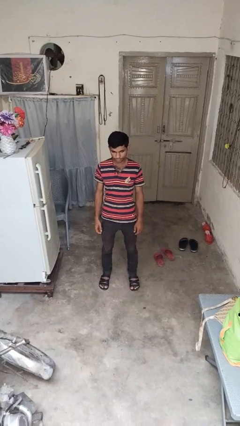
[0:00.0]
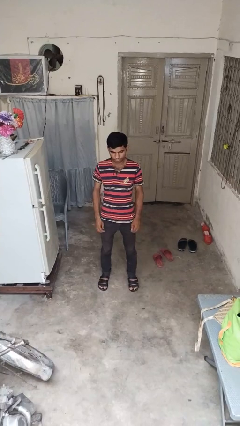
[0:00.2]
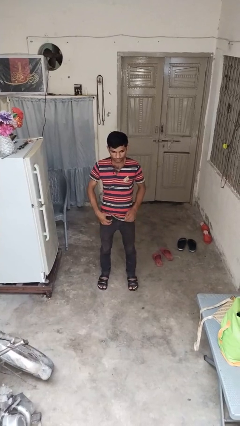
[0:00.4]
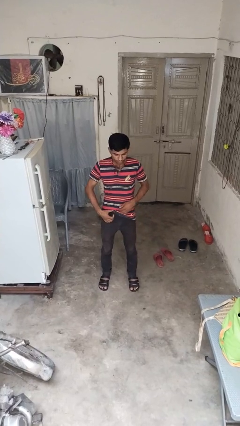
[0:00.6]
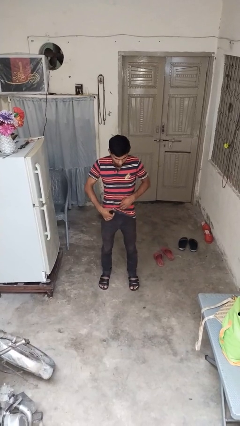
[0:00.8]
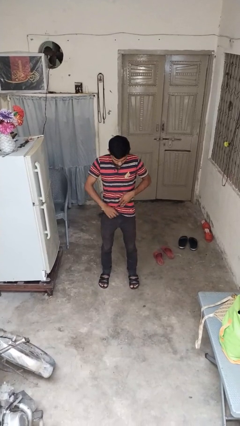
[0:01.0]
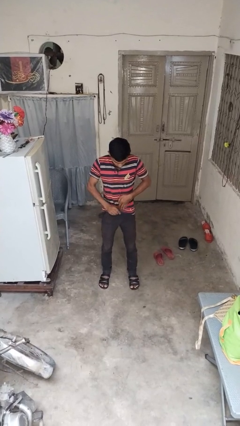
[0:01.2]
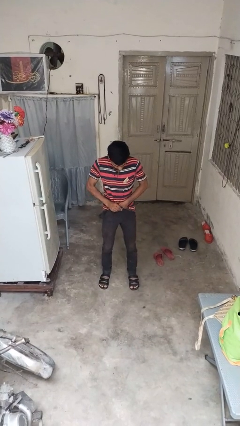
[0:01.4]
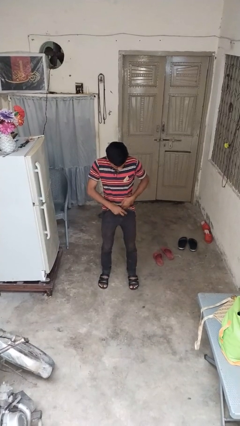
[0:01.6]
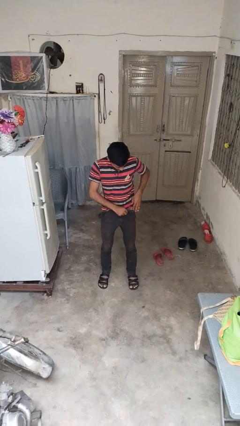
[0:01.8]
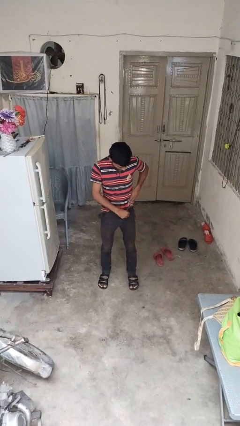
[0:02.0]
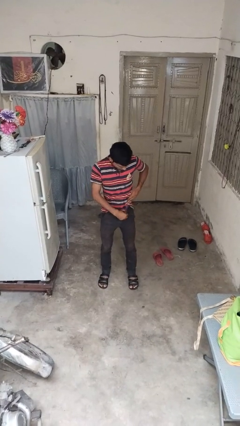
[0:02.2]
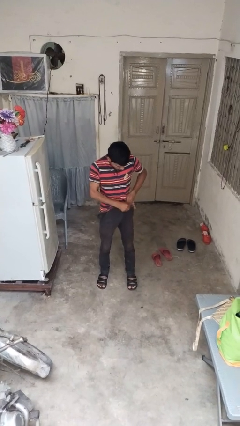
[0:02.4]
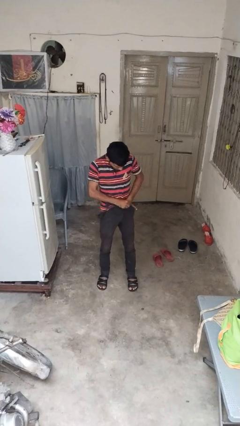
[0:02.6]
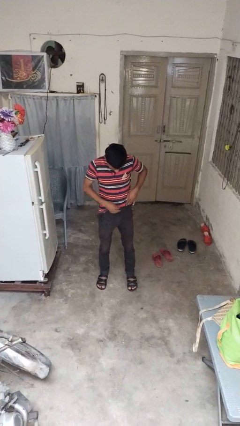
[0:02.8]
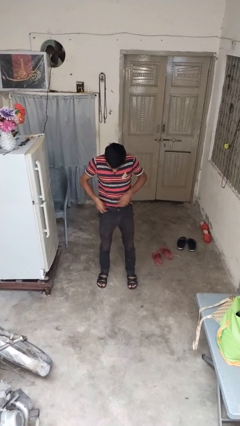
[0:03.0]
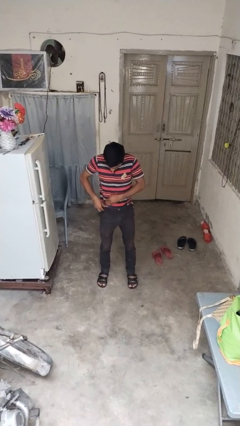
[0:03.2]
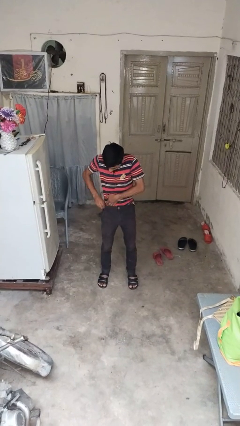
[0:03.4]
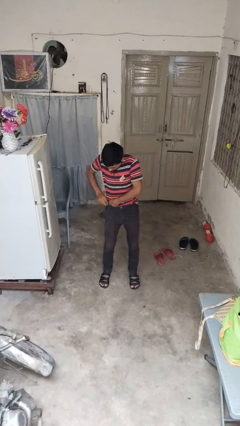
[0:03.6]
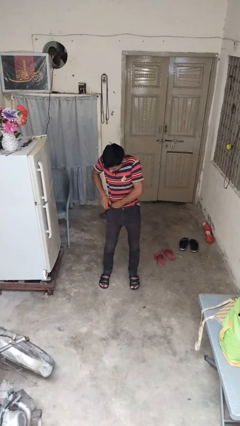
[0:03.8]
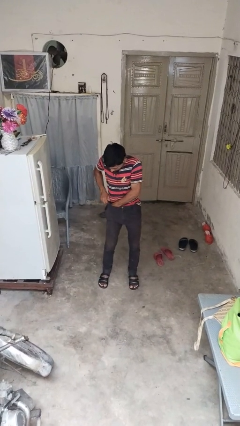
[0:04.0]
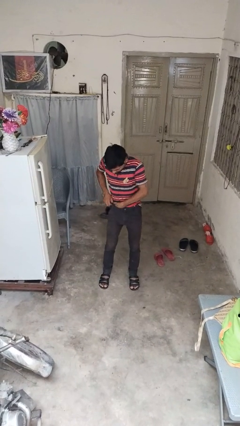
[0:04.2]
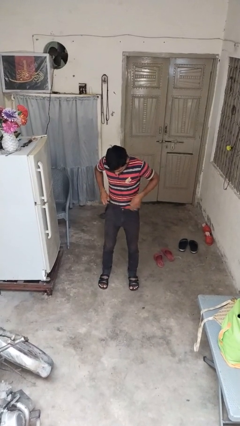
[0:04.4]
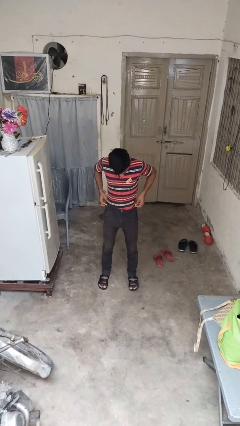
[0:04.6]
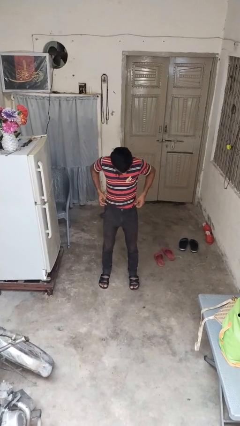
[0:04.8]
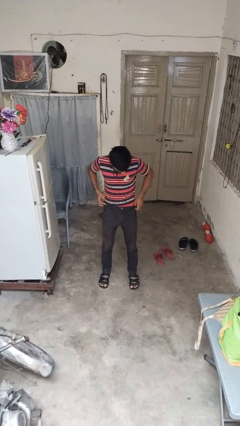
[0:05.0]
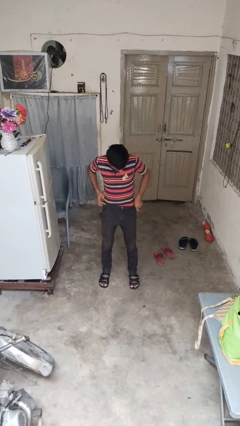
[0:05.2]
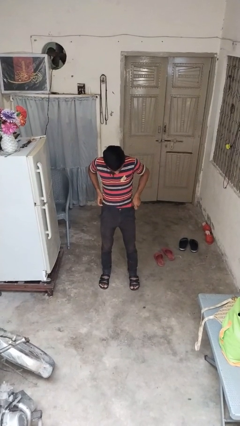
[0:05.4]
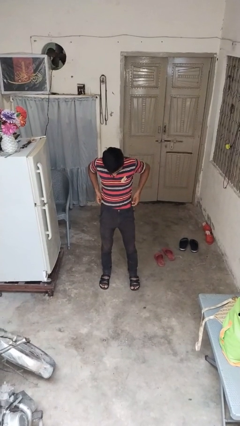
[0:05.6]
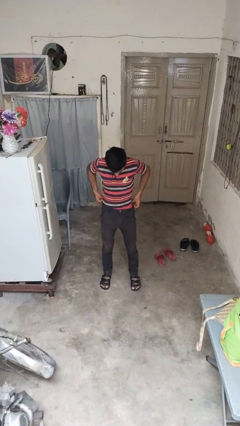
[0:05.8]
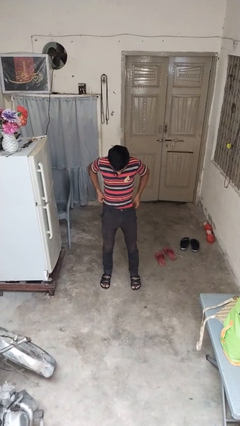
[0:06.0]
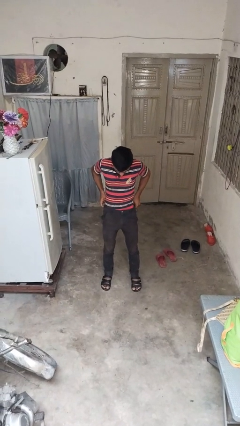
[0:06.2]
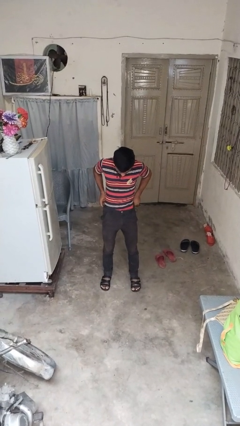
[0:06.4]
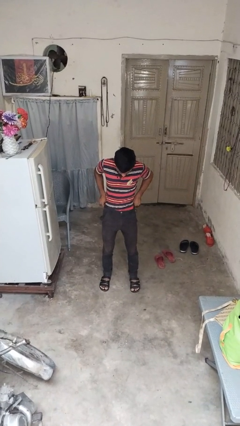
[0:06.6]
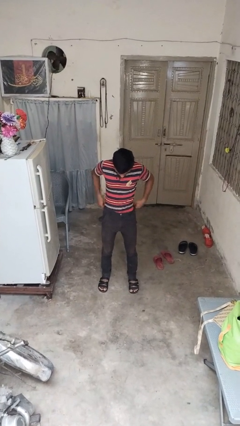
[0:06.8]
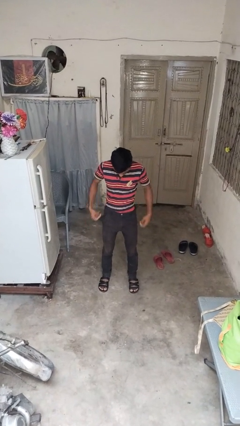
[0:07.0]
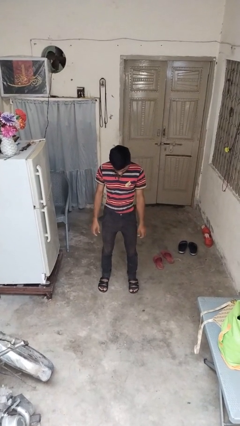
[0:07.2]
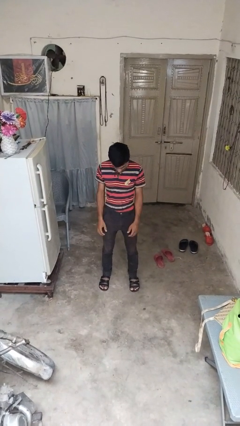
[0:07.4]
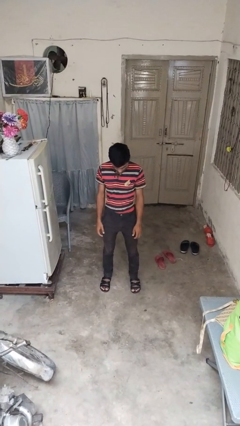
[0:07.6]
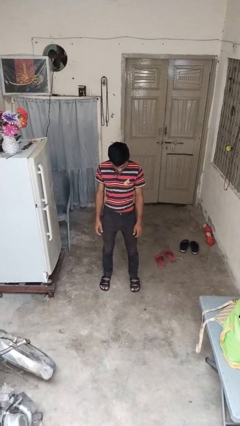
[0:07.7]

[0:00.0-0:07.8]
person tucks in shirt

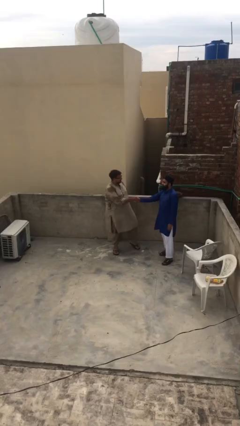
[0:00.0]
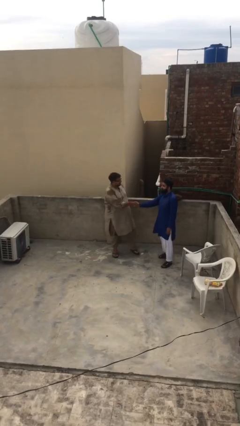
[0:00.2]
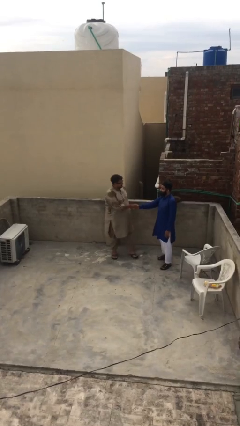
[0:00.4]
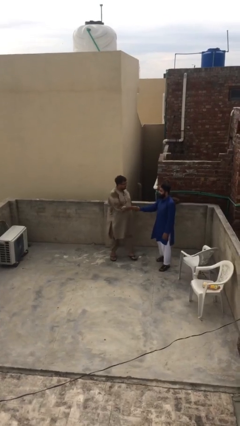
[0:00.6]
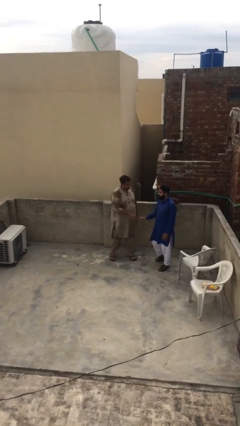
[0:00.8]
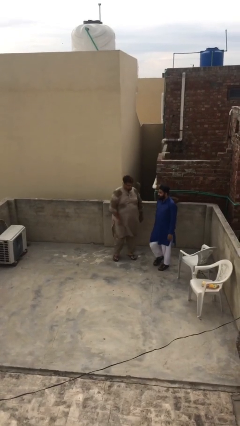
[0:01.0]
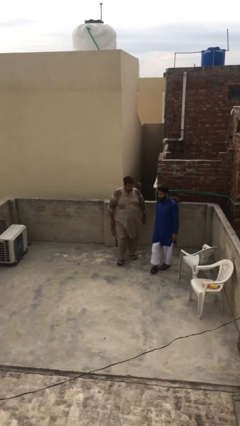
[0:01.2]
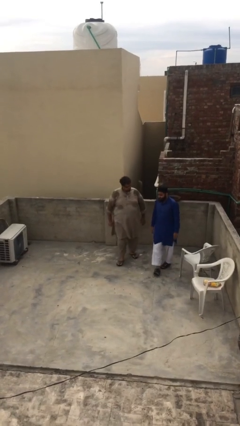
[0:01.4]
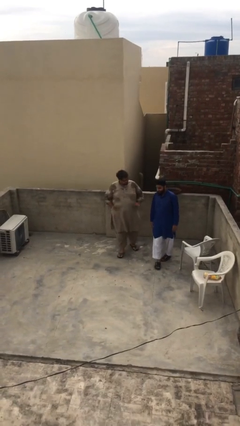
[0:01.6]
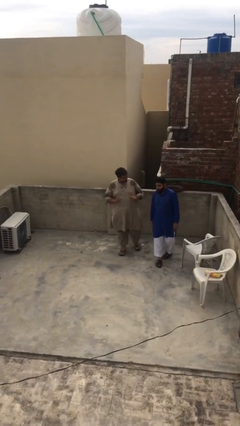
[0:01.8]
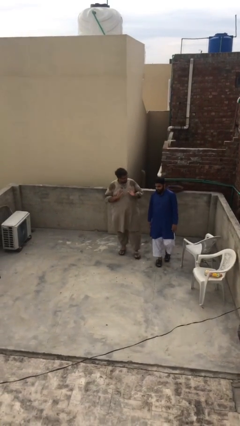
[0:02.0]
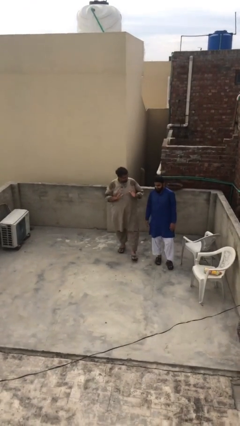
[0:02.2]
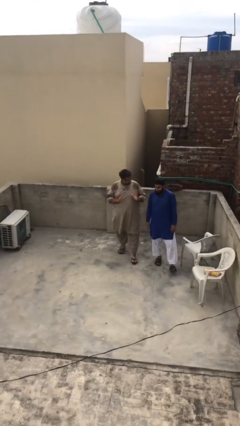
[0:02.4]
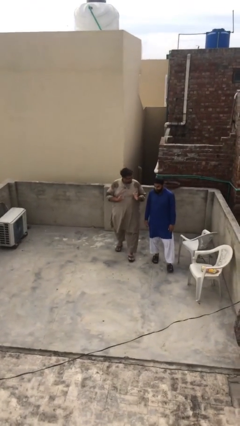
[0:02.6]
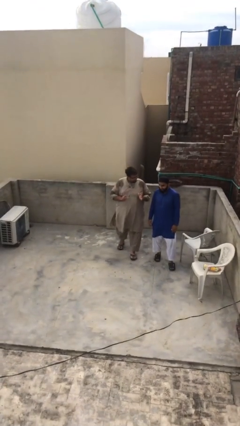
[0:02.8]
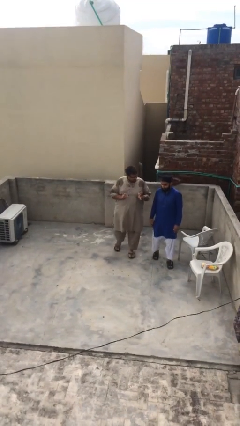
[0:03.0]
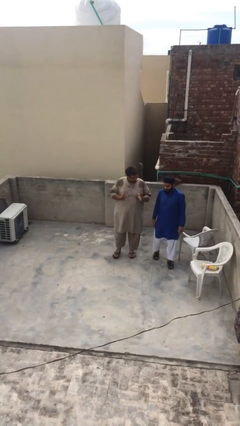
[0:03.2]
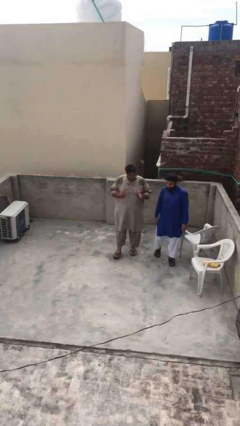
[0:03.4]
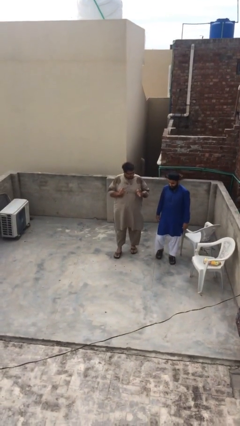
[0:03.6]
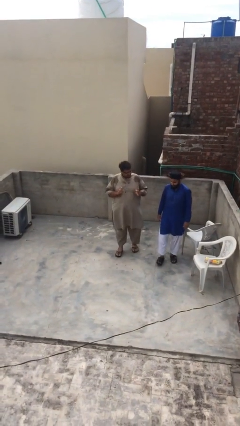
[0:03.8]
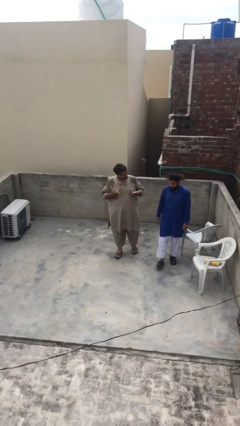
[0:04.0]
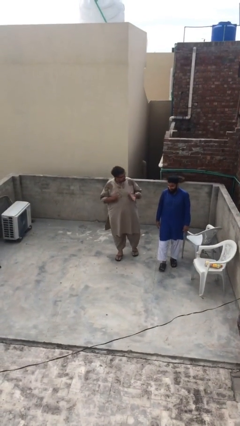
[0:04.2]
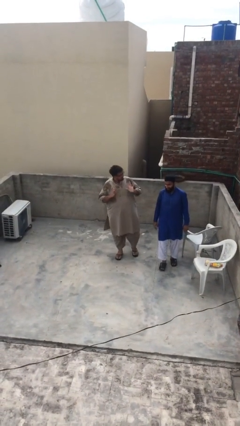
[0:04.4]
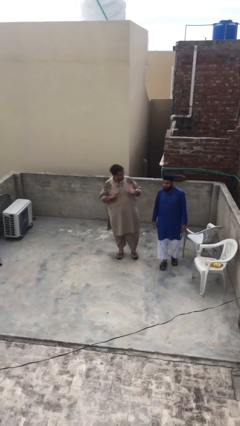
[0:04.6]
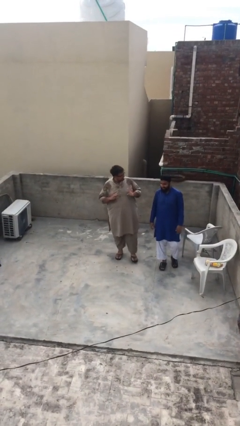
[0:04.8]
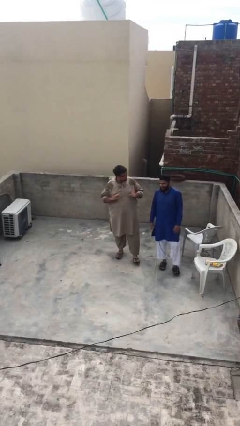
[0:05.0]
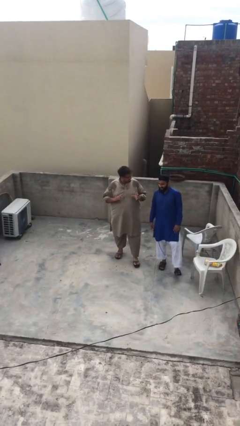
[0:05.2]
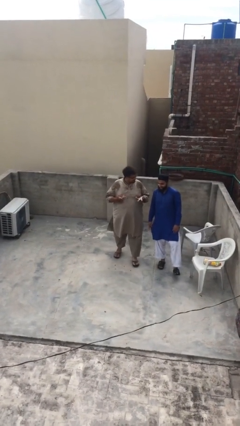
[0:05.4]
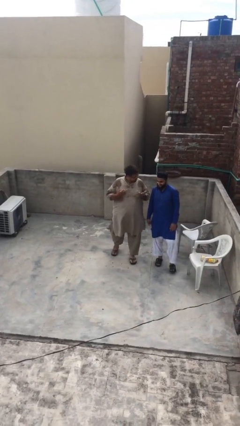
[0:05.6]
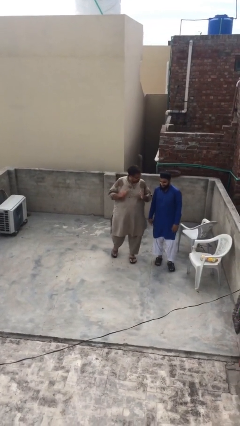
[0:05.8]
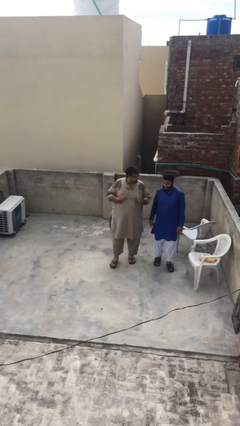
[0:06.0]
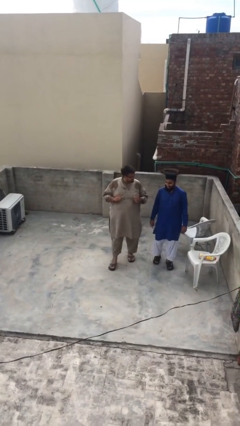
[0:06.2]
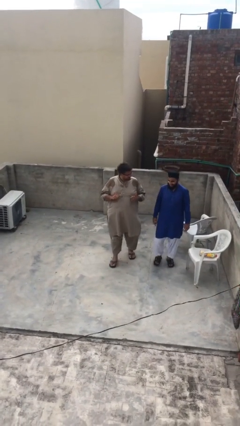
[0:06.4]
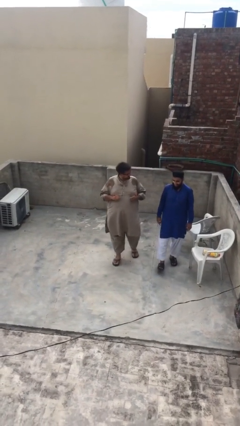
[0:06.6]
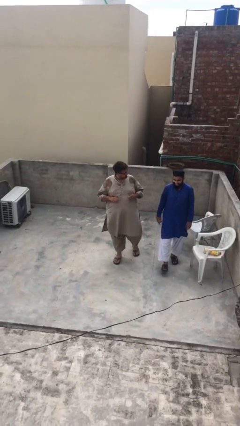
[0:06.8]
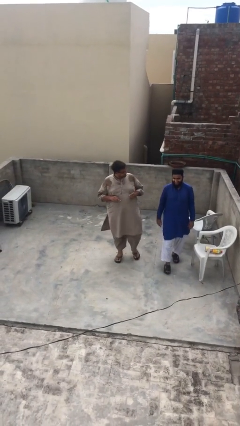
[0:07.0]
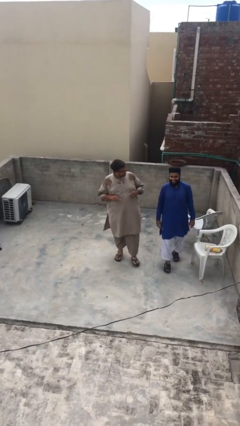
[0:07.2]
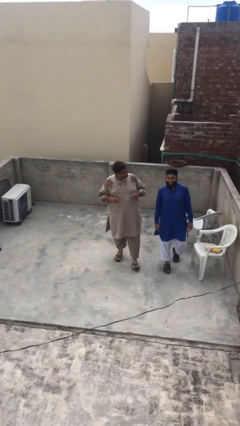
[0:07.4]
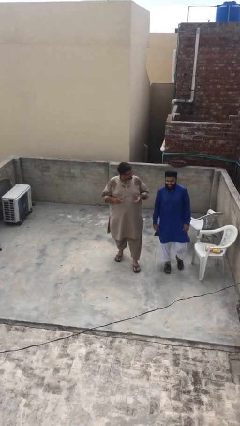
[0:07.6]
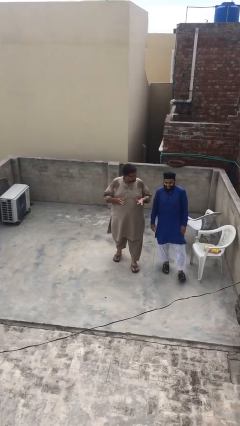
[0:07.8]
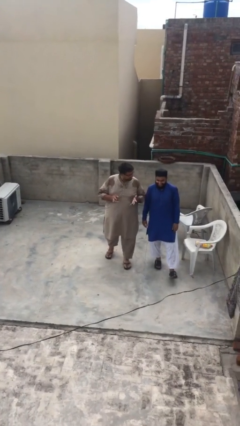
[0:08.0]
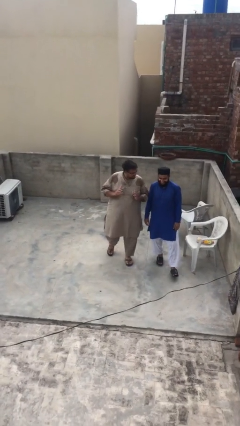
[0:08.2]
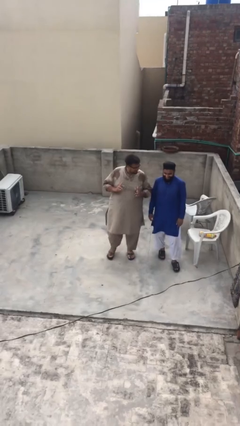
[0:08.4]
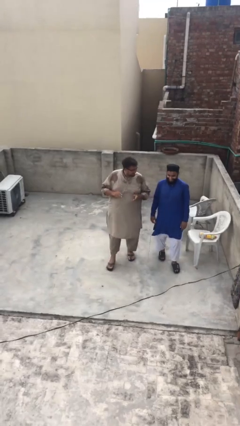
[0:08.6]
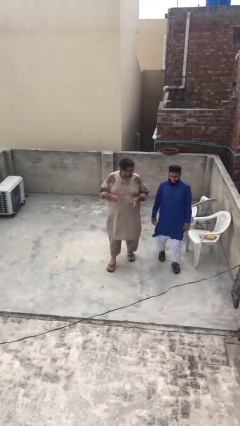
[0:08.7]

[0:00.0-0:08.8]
person talks to person

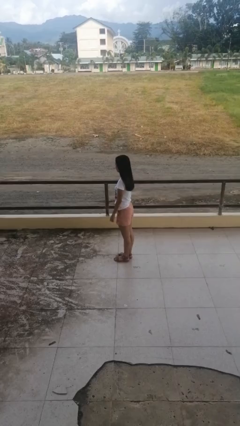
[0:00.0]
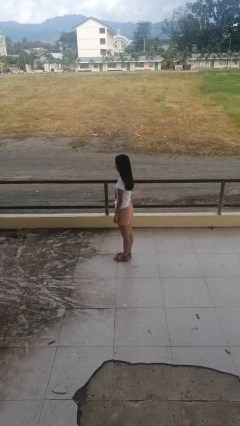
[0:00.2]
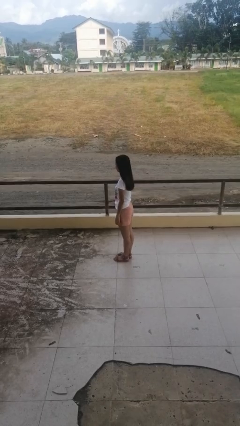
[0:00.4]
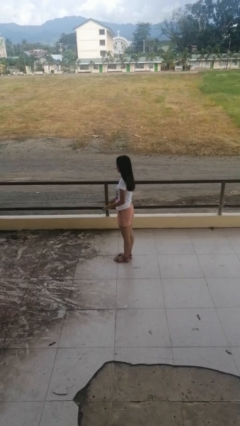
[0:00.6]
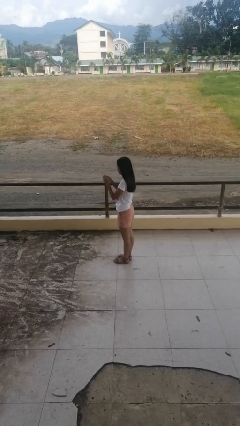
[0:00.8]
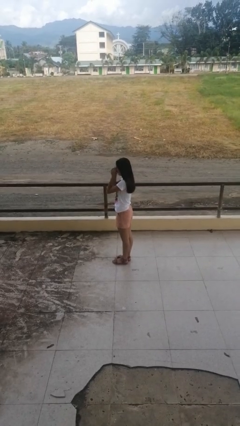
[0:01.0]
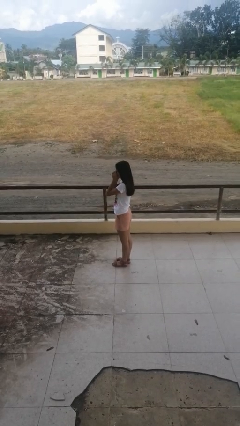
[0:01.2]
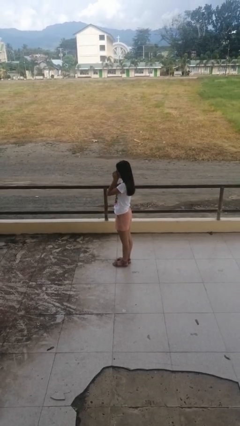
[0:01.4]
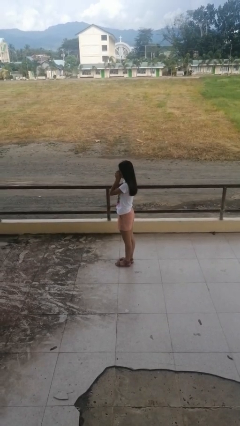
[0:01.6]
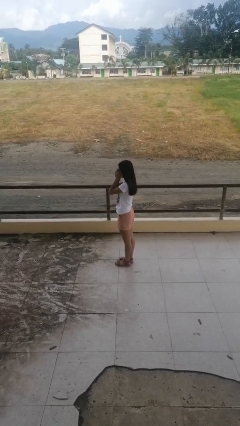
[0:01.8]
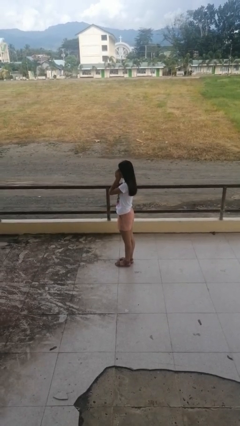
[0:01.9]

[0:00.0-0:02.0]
person rubs eyes
